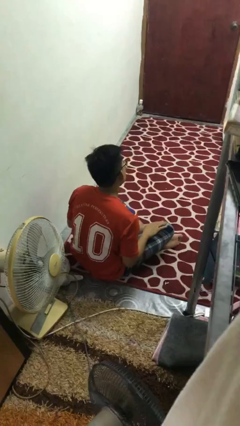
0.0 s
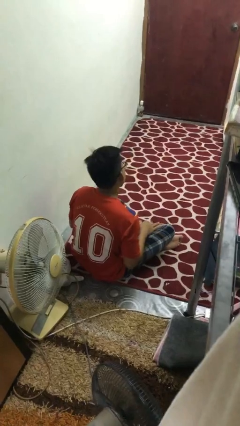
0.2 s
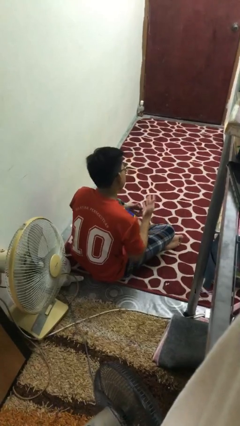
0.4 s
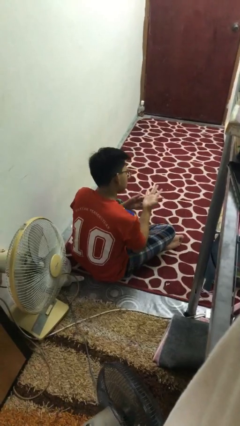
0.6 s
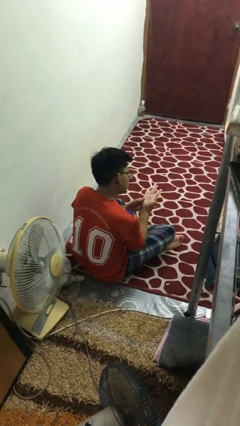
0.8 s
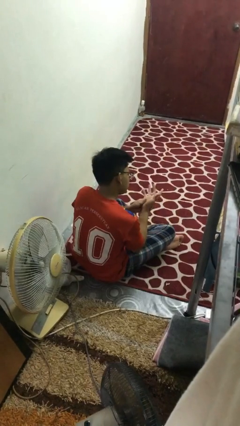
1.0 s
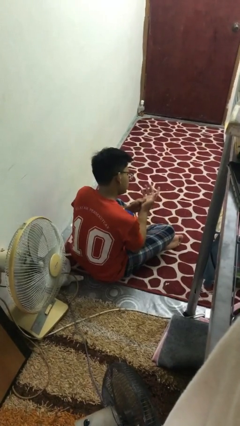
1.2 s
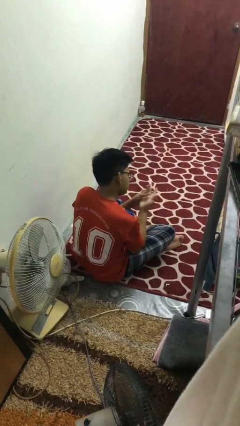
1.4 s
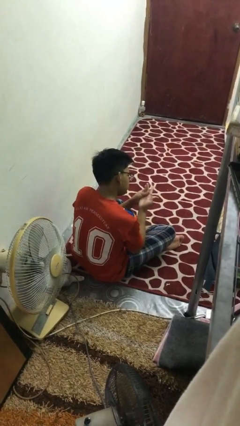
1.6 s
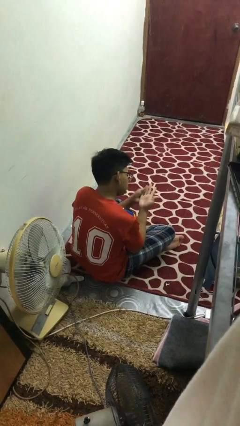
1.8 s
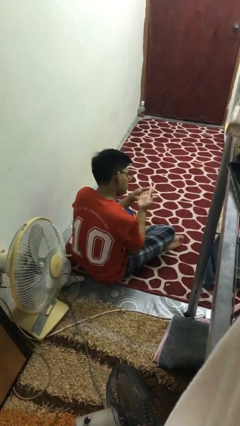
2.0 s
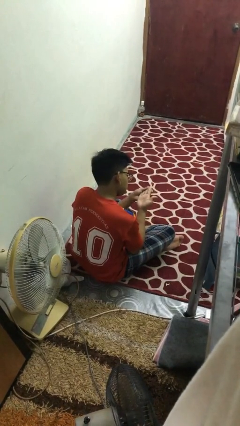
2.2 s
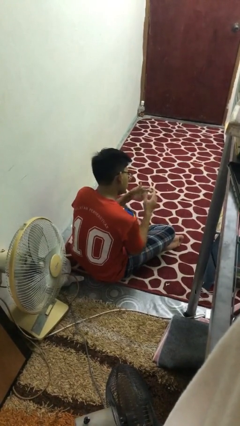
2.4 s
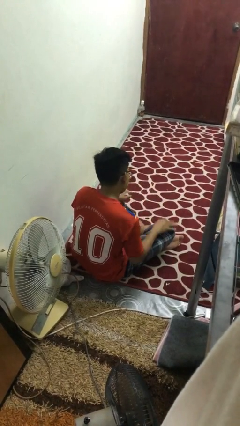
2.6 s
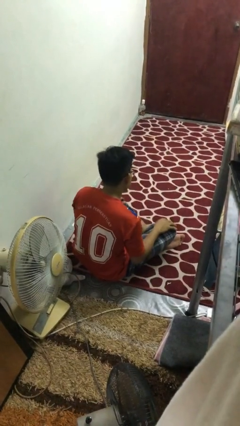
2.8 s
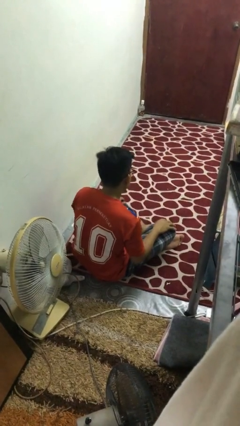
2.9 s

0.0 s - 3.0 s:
person looks at hands in lap

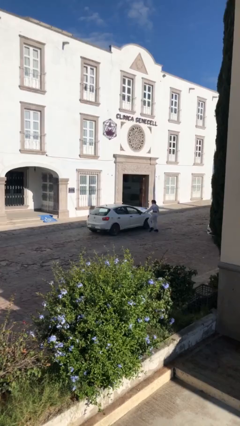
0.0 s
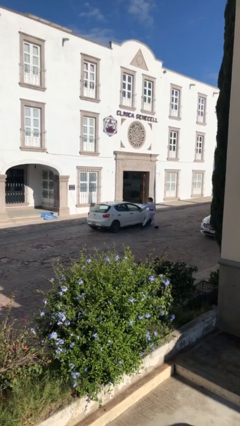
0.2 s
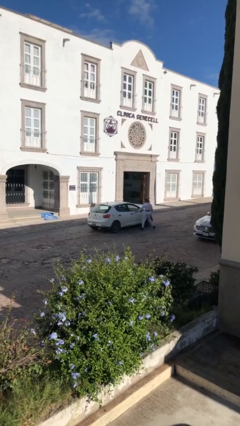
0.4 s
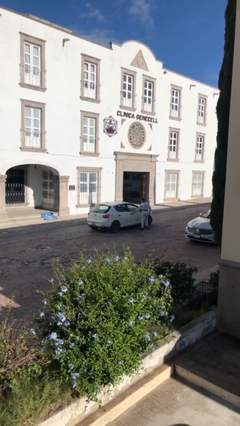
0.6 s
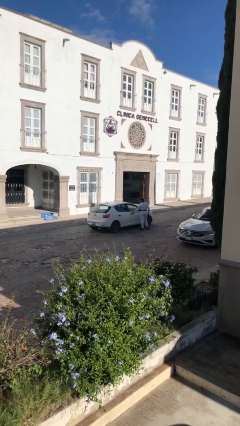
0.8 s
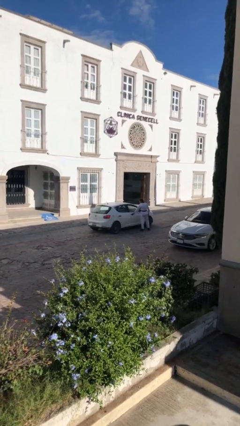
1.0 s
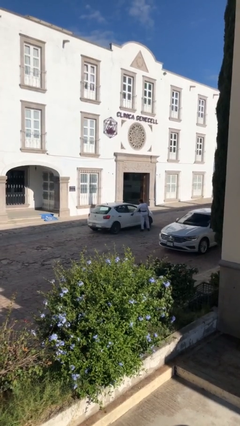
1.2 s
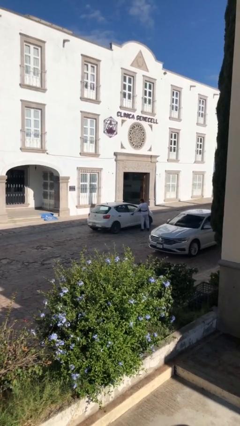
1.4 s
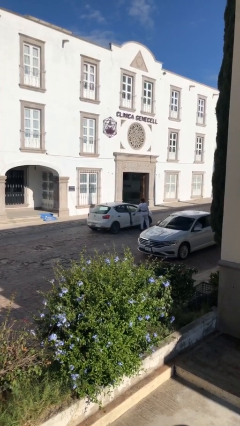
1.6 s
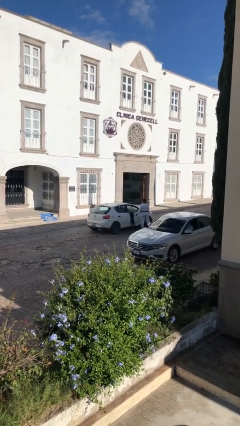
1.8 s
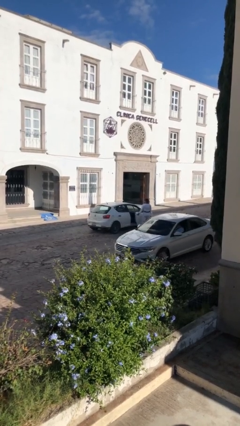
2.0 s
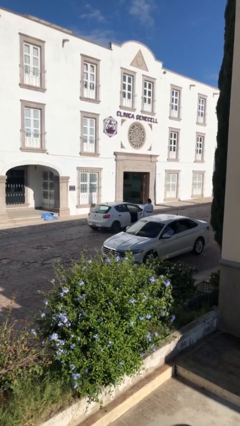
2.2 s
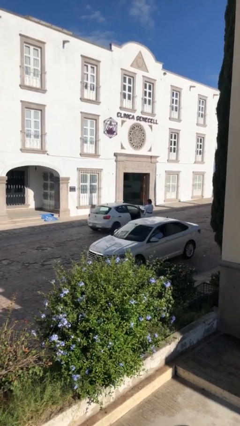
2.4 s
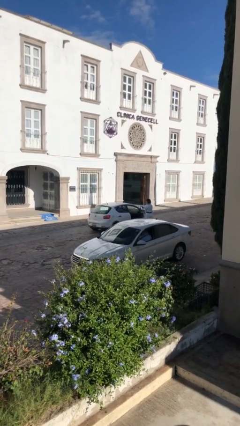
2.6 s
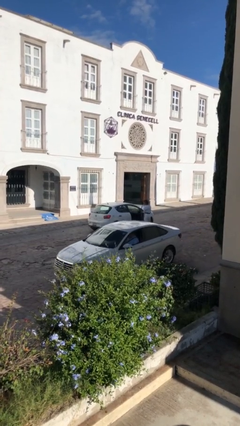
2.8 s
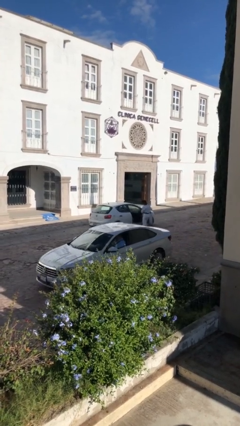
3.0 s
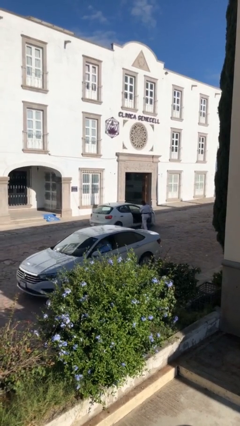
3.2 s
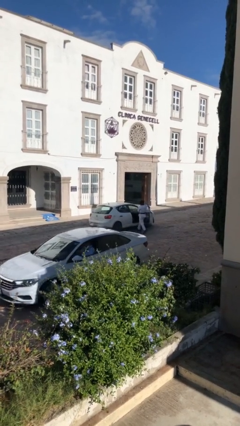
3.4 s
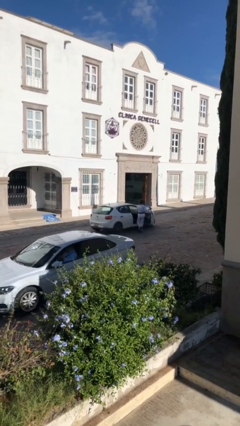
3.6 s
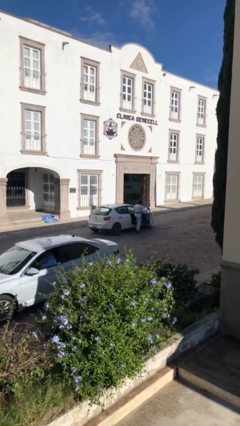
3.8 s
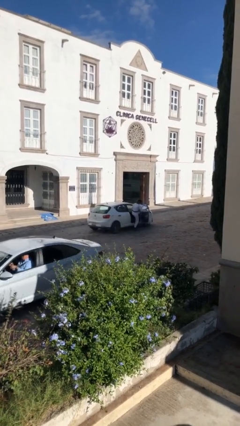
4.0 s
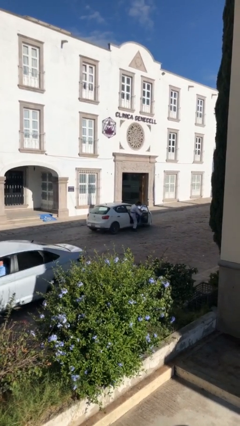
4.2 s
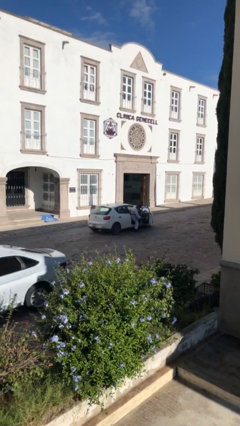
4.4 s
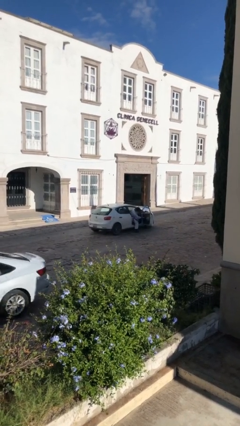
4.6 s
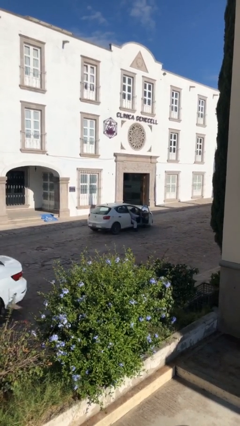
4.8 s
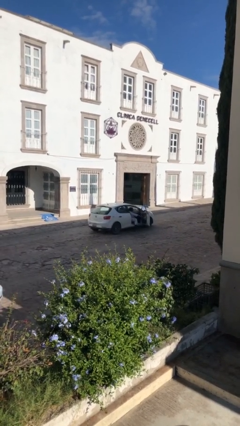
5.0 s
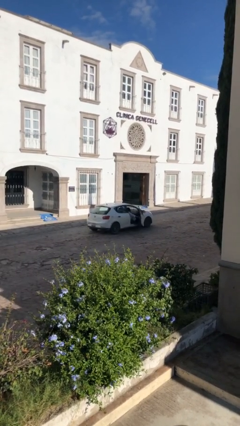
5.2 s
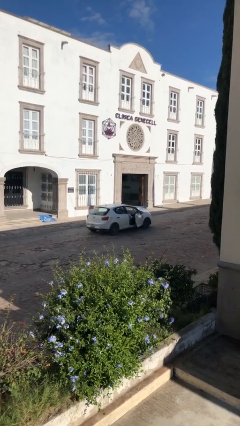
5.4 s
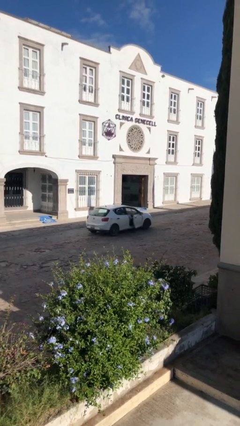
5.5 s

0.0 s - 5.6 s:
car picks up person

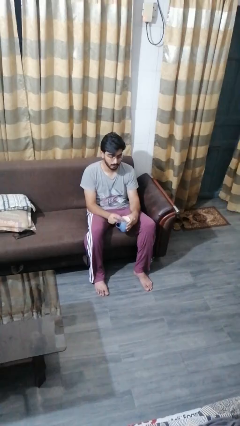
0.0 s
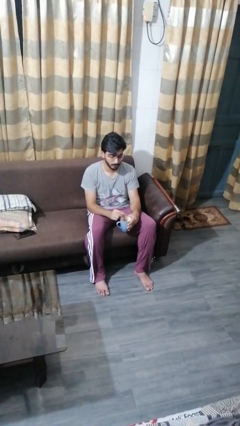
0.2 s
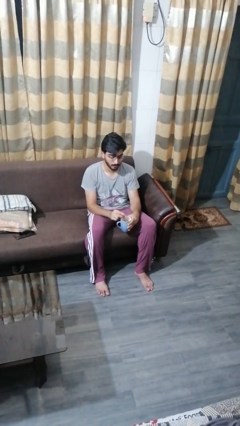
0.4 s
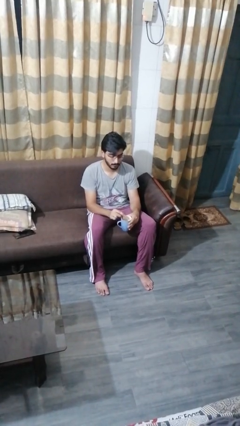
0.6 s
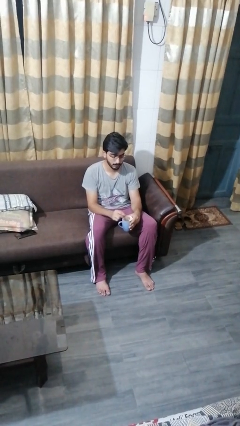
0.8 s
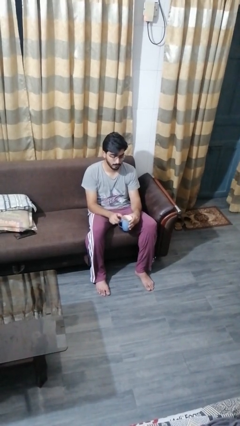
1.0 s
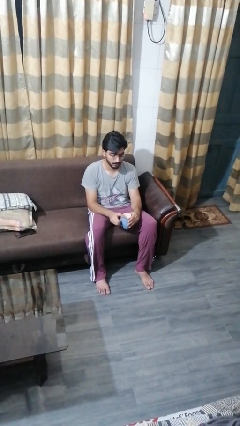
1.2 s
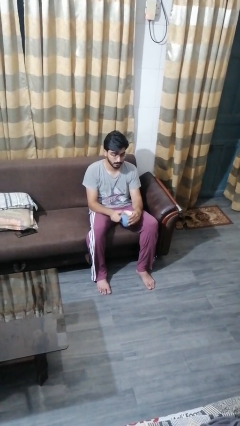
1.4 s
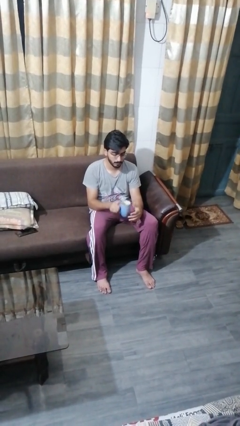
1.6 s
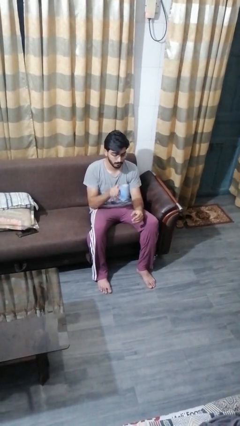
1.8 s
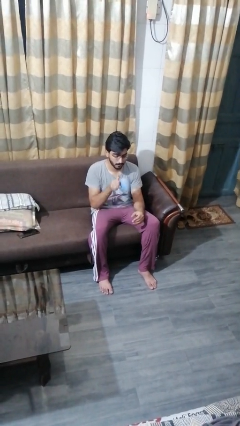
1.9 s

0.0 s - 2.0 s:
person stirs mug

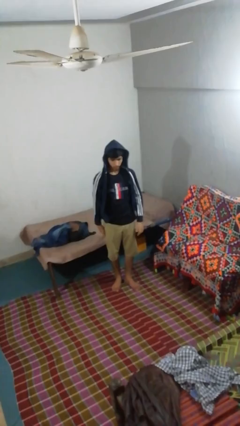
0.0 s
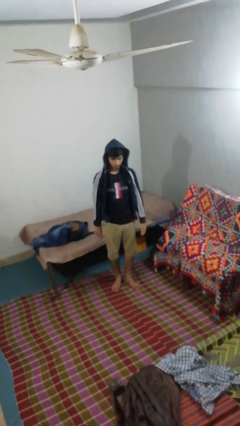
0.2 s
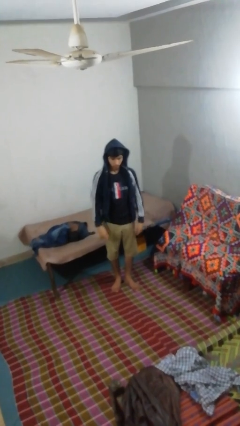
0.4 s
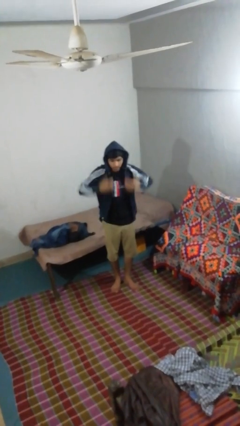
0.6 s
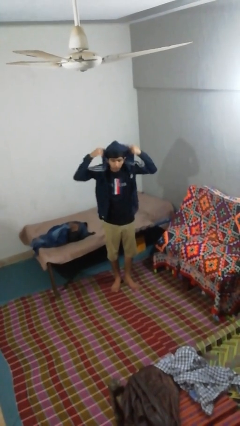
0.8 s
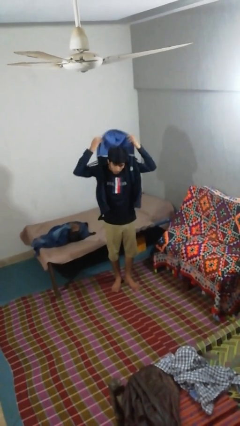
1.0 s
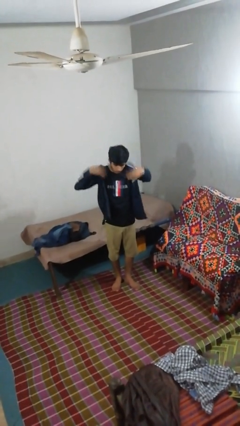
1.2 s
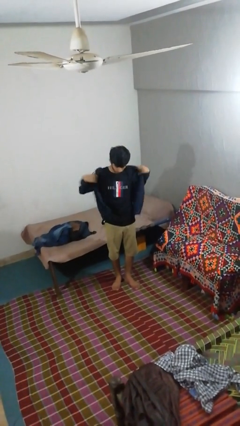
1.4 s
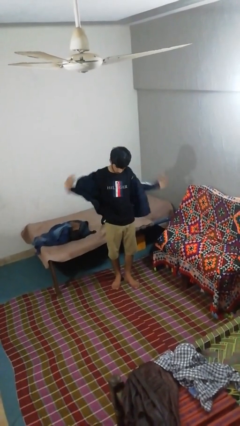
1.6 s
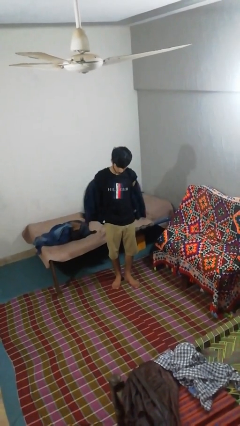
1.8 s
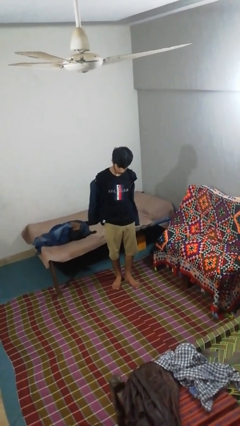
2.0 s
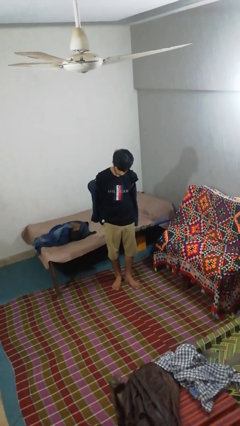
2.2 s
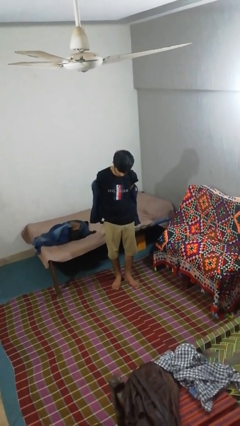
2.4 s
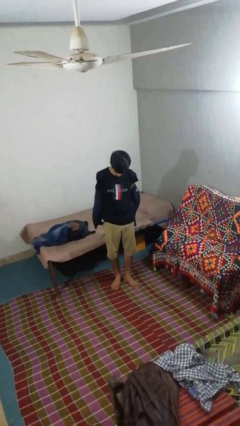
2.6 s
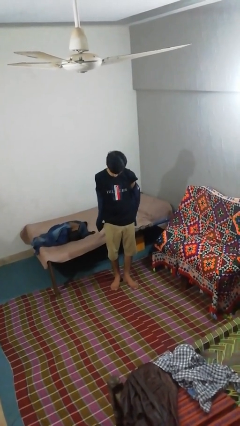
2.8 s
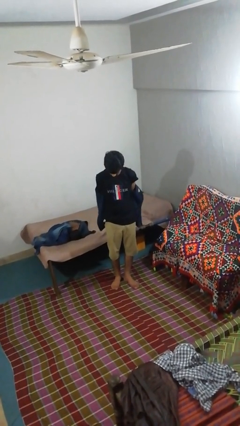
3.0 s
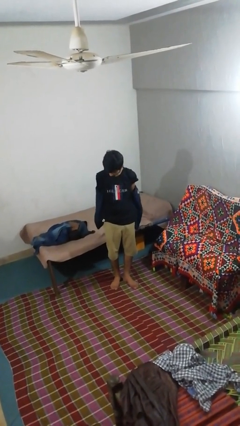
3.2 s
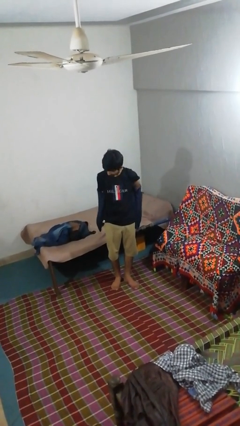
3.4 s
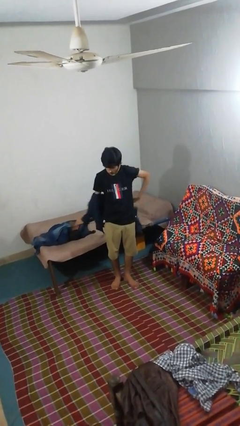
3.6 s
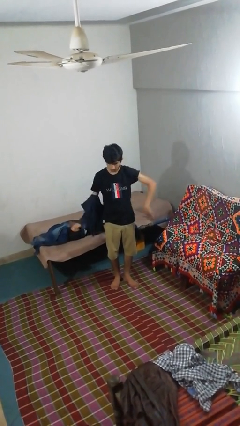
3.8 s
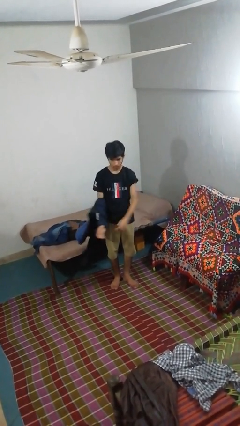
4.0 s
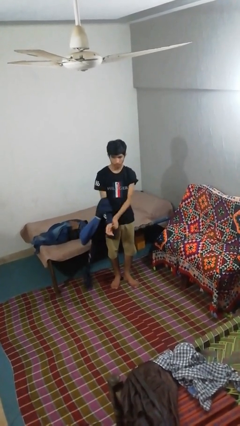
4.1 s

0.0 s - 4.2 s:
person takes off hoodie

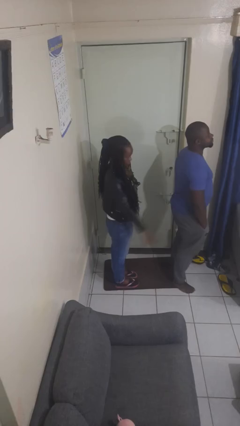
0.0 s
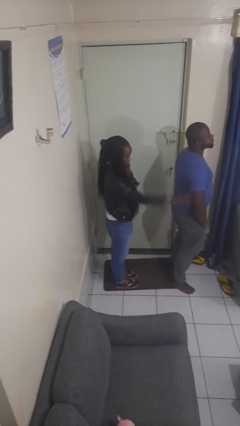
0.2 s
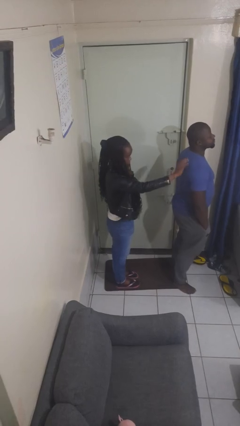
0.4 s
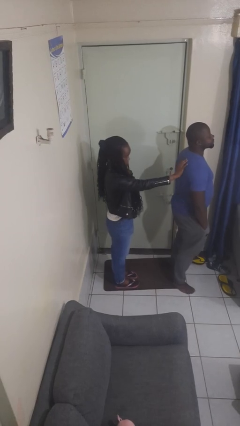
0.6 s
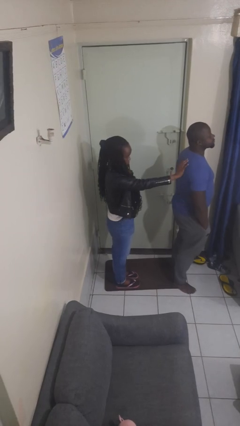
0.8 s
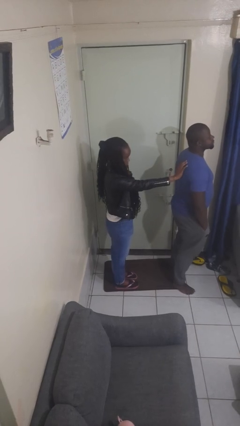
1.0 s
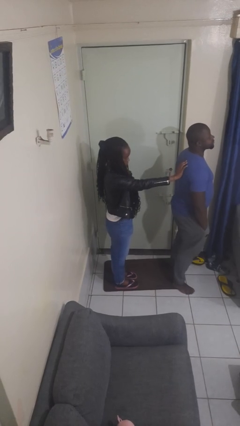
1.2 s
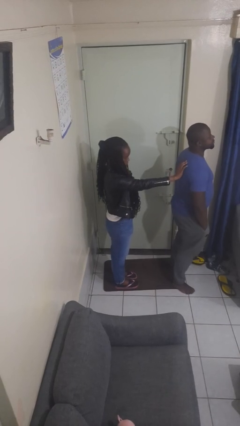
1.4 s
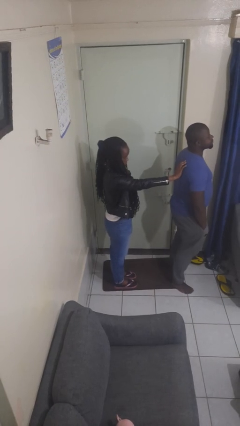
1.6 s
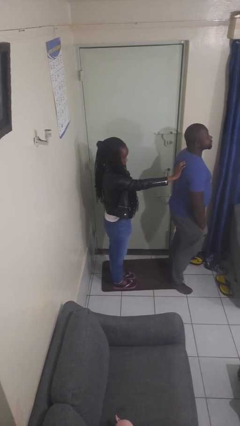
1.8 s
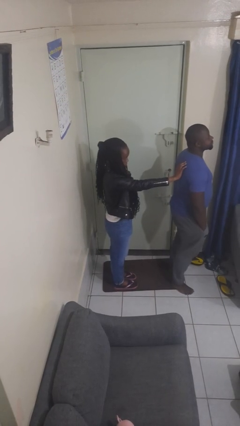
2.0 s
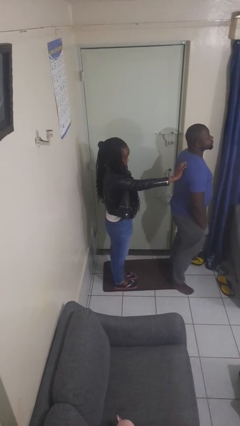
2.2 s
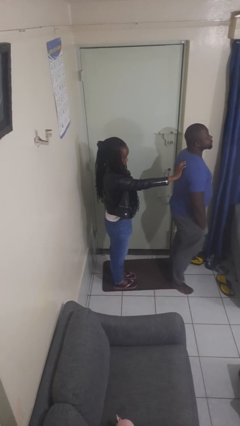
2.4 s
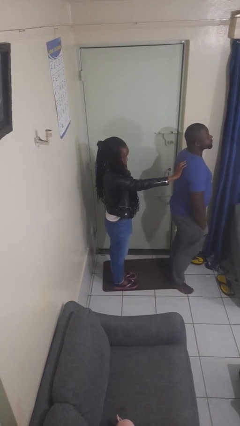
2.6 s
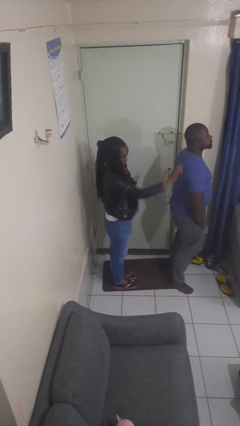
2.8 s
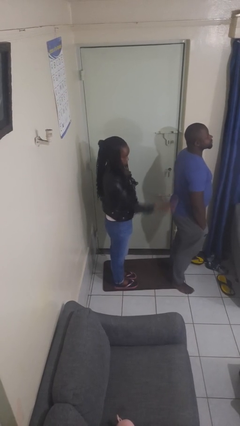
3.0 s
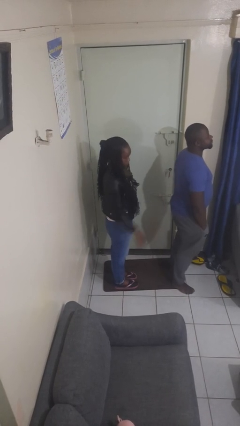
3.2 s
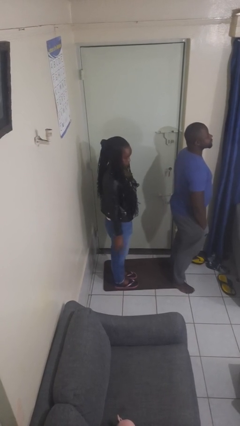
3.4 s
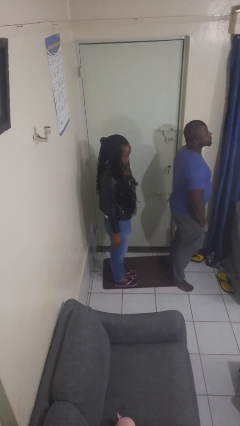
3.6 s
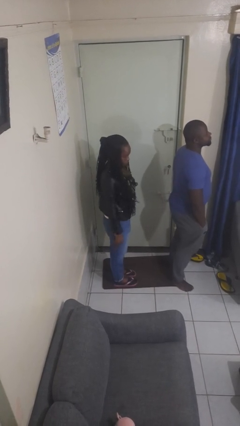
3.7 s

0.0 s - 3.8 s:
person touches back of person
